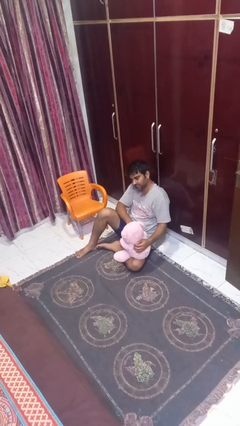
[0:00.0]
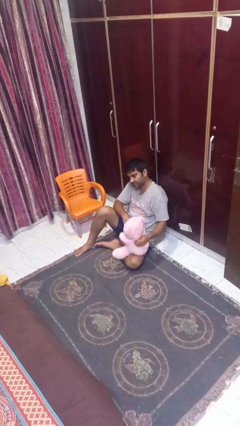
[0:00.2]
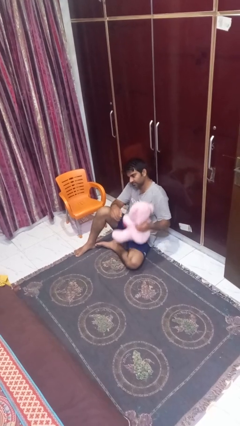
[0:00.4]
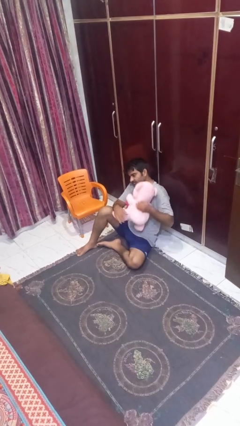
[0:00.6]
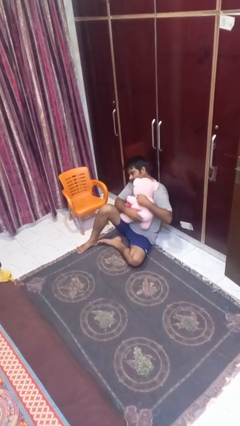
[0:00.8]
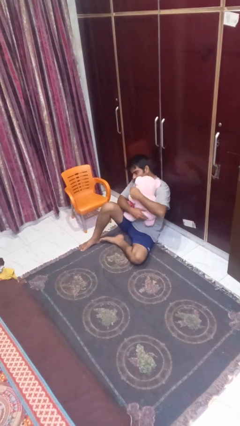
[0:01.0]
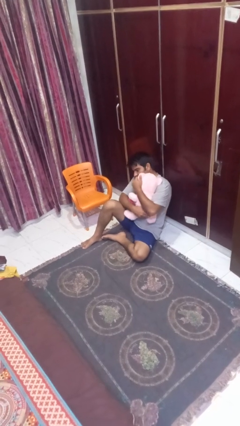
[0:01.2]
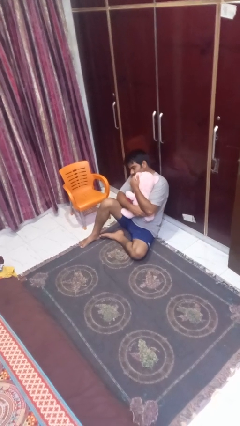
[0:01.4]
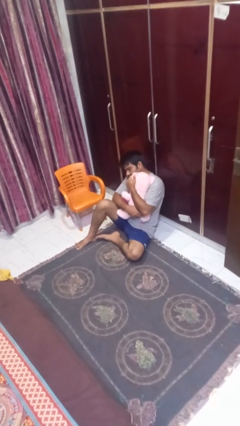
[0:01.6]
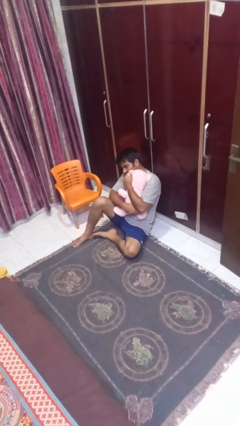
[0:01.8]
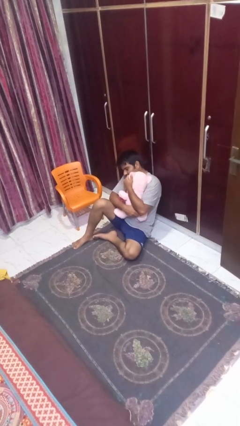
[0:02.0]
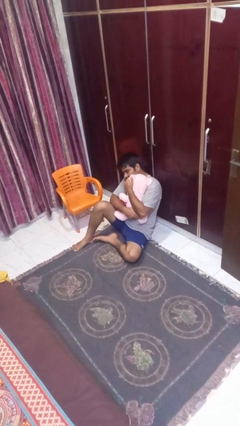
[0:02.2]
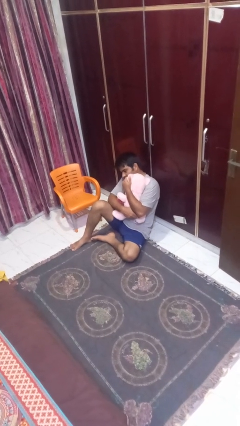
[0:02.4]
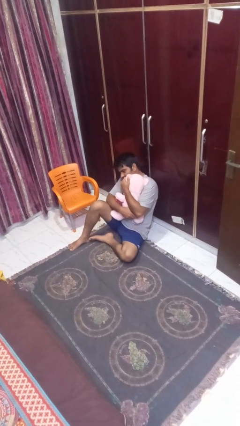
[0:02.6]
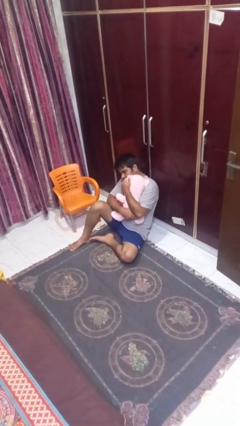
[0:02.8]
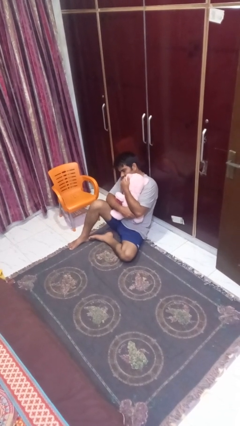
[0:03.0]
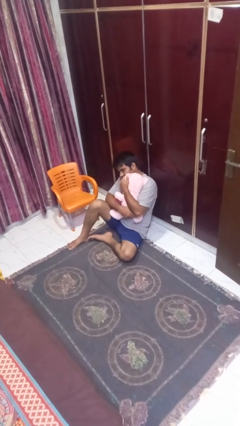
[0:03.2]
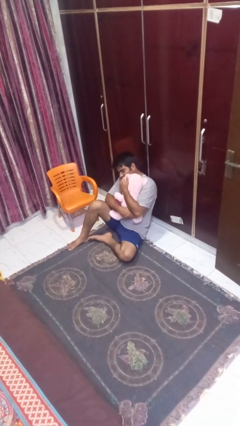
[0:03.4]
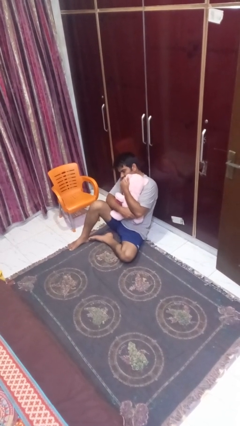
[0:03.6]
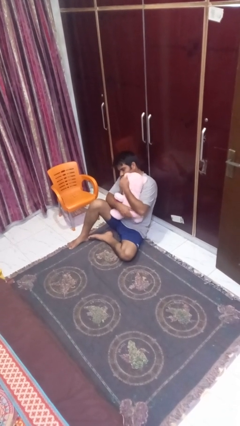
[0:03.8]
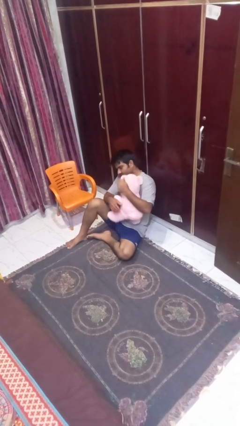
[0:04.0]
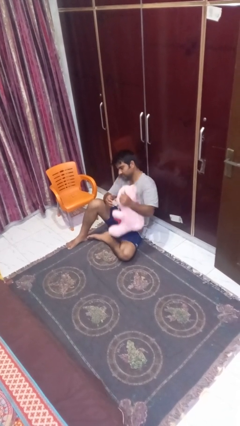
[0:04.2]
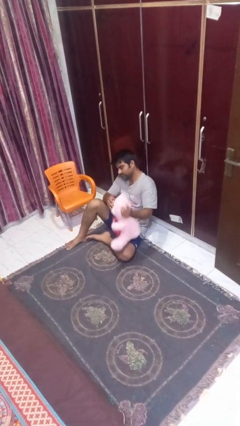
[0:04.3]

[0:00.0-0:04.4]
person hugs stuffed animal

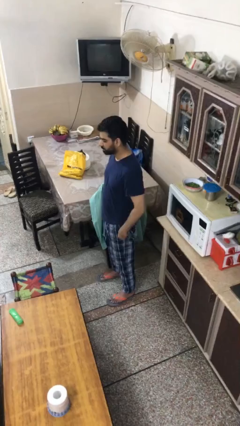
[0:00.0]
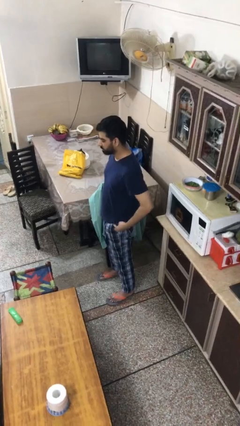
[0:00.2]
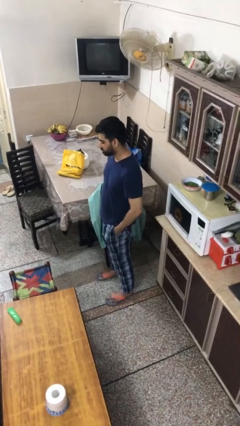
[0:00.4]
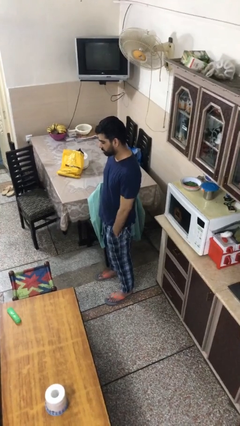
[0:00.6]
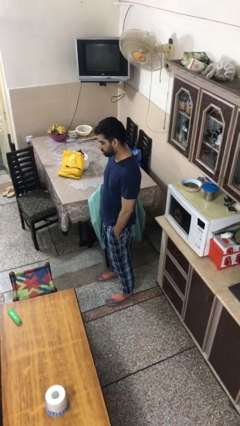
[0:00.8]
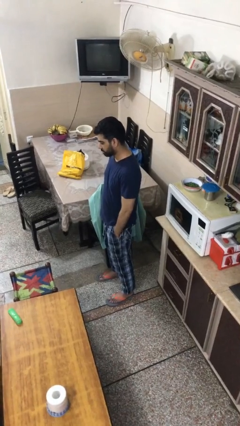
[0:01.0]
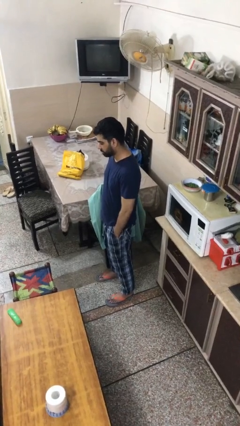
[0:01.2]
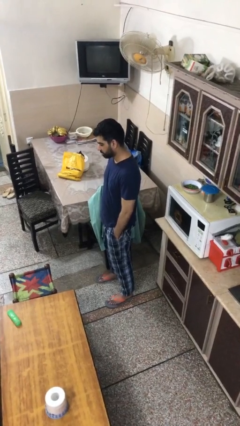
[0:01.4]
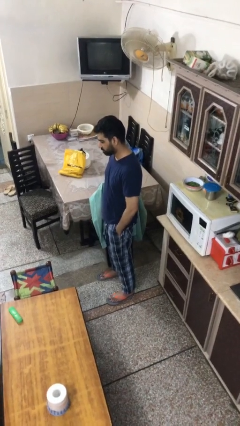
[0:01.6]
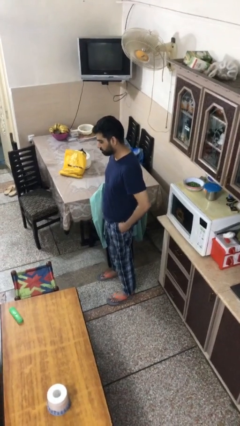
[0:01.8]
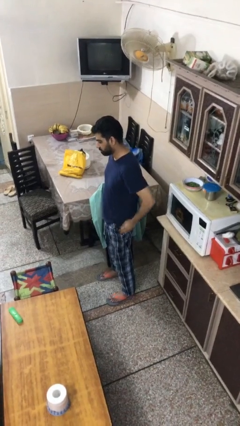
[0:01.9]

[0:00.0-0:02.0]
person puts hands in back pockets

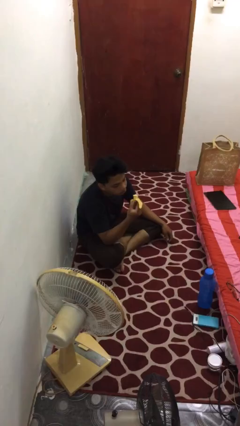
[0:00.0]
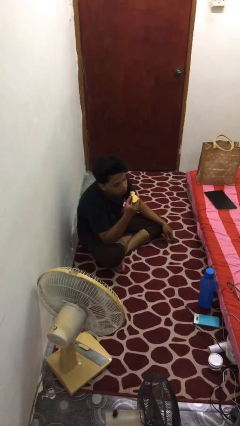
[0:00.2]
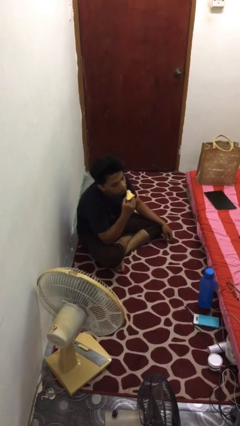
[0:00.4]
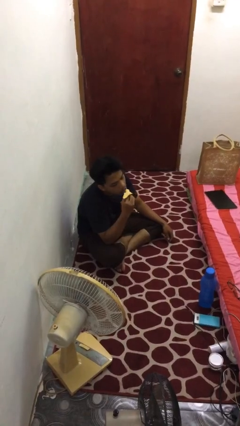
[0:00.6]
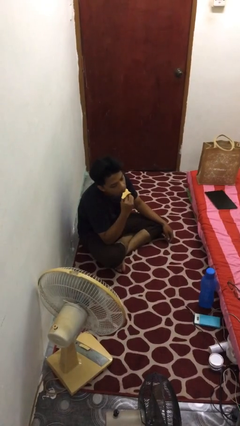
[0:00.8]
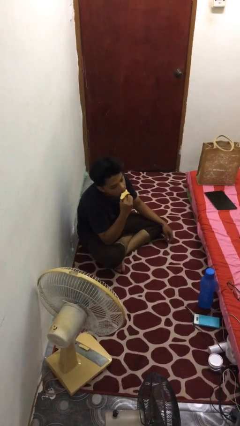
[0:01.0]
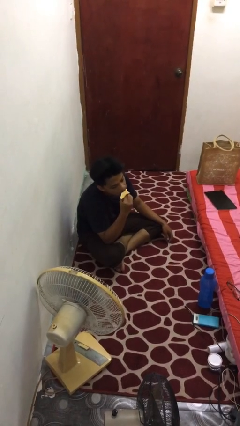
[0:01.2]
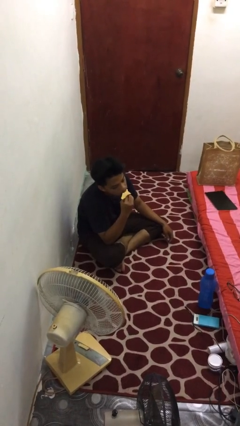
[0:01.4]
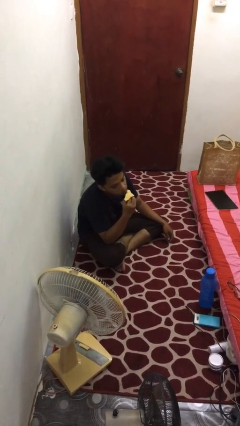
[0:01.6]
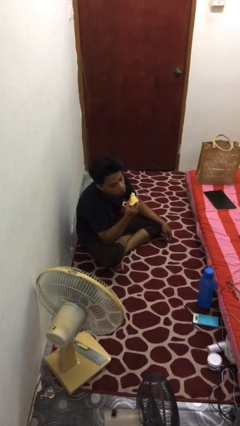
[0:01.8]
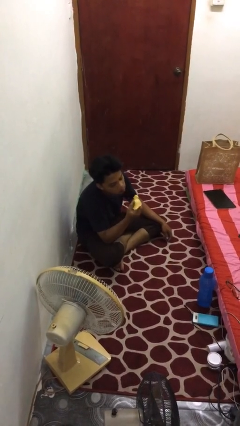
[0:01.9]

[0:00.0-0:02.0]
person eats banana

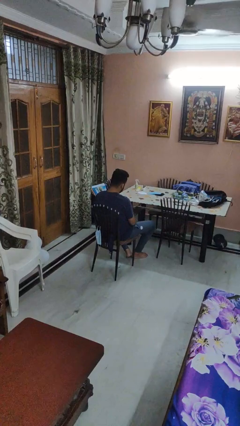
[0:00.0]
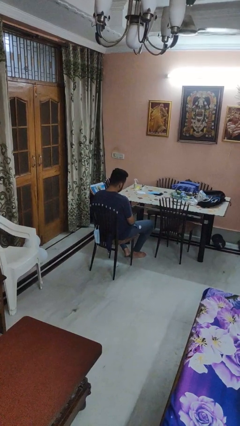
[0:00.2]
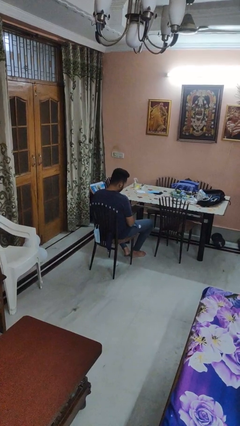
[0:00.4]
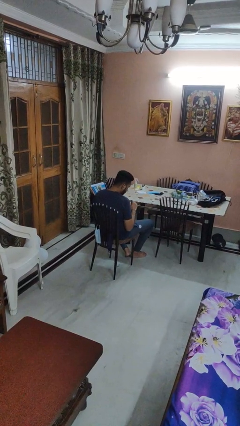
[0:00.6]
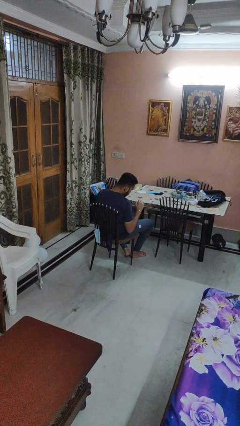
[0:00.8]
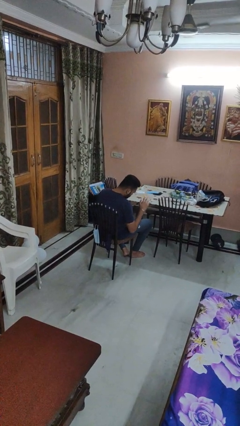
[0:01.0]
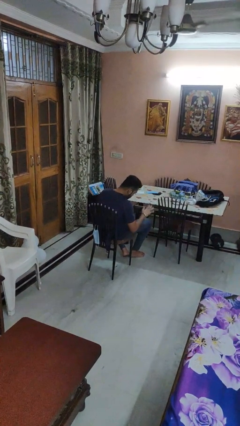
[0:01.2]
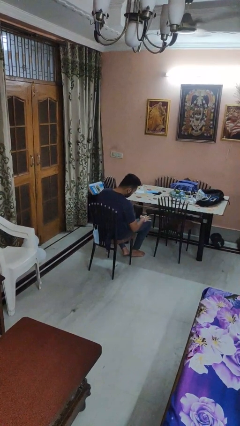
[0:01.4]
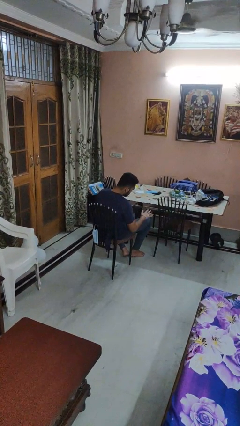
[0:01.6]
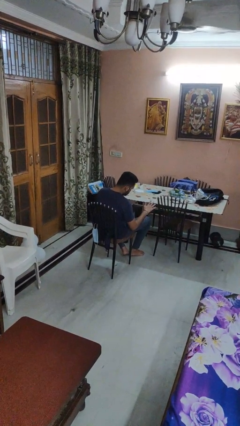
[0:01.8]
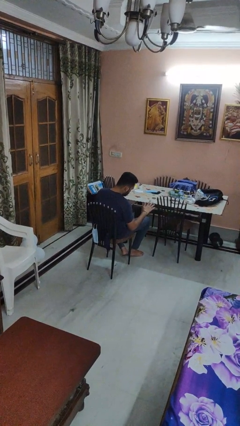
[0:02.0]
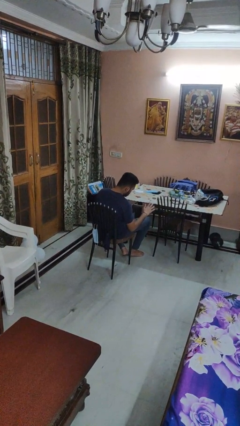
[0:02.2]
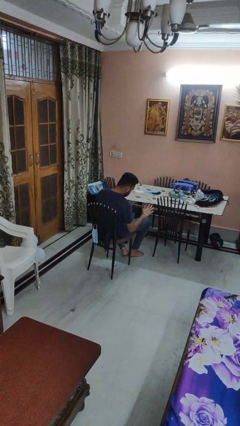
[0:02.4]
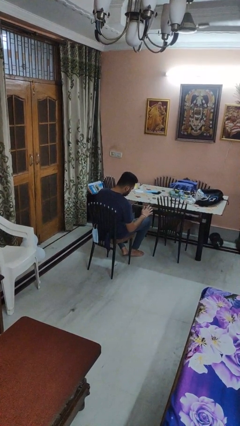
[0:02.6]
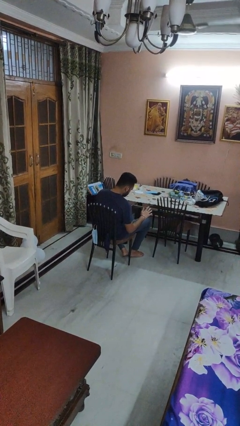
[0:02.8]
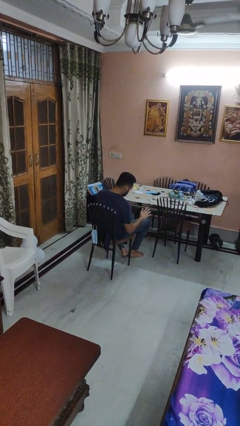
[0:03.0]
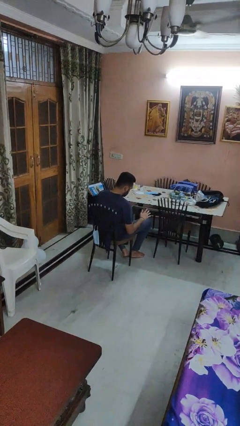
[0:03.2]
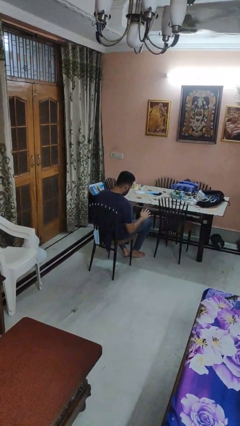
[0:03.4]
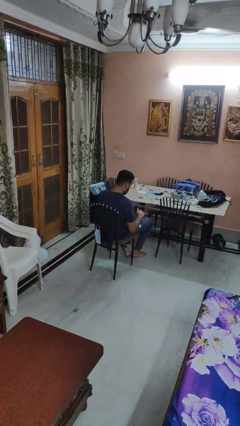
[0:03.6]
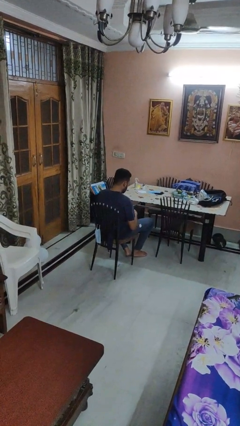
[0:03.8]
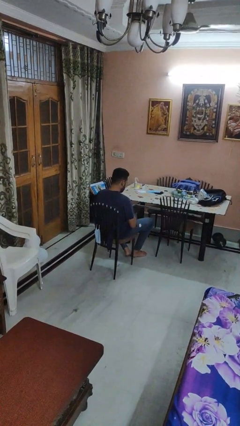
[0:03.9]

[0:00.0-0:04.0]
person swats bug

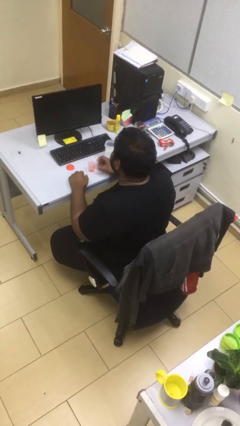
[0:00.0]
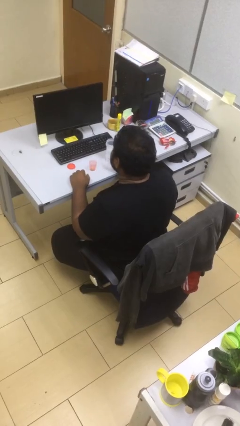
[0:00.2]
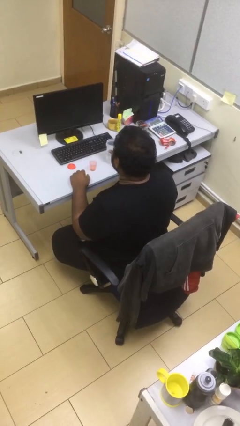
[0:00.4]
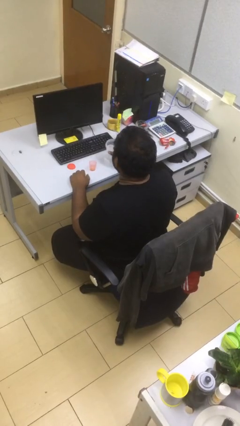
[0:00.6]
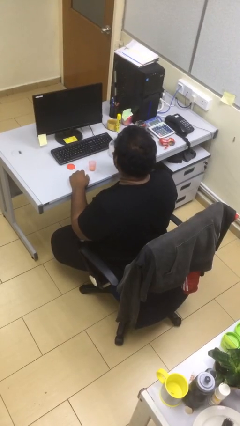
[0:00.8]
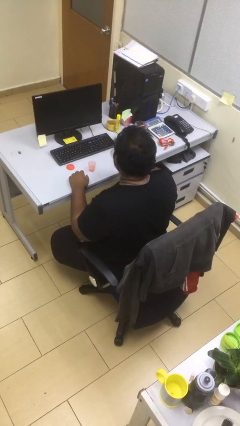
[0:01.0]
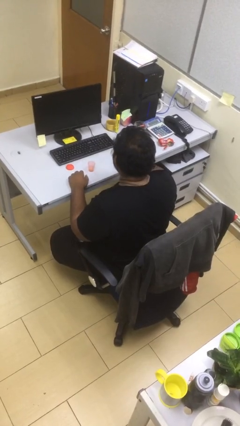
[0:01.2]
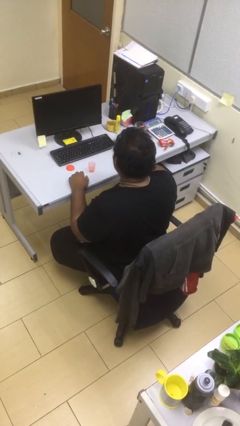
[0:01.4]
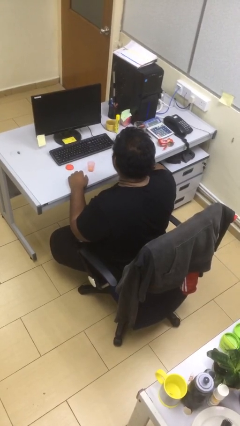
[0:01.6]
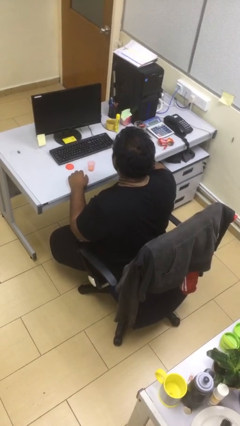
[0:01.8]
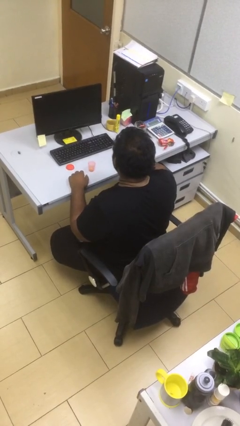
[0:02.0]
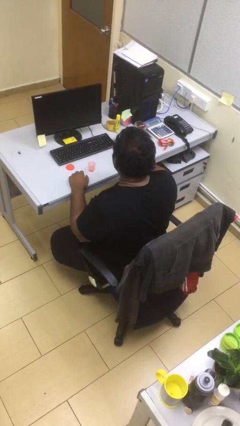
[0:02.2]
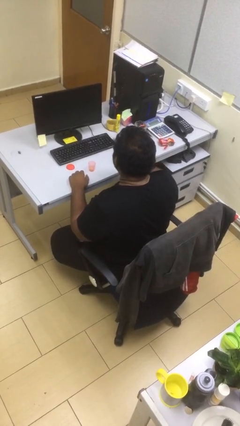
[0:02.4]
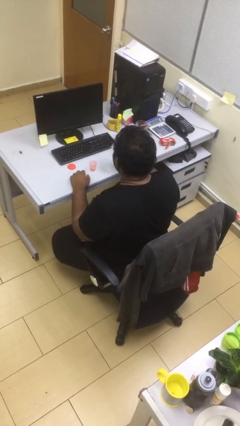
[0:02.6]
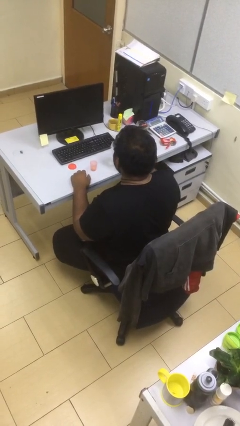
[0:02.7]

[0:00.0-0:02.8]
person drinks from cup

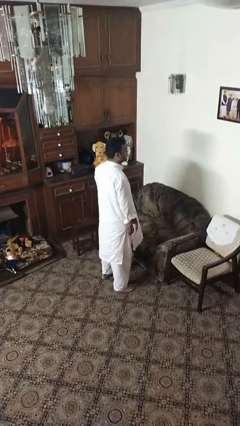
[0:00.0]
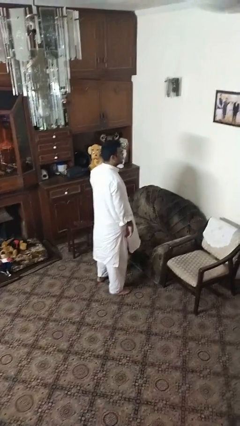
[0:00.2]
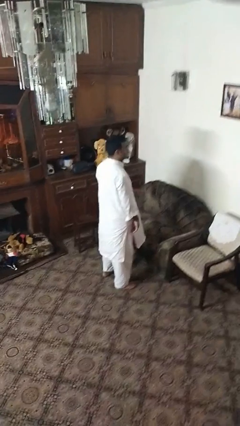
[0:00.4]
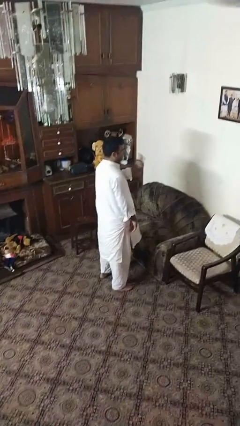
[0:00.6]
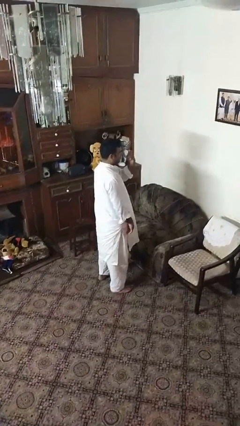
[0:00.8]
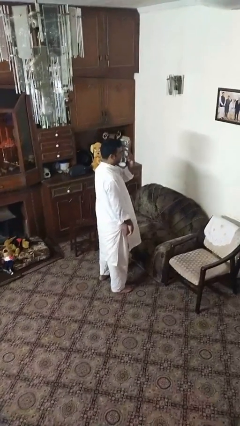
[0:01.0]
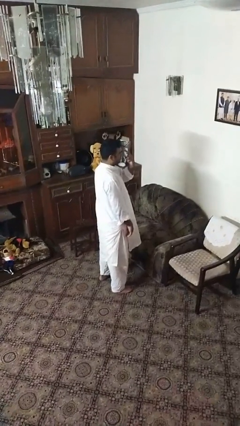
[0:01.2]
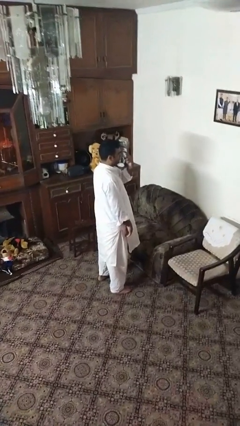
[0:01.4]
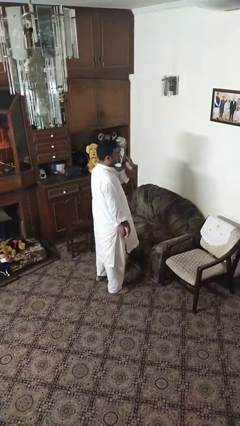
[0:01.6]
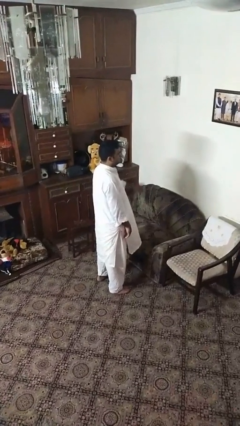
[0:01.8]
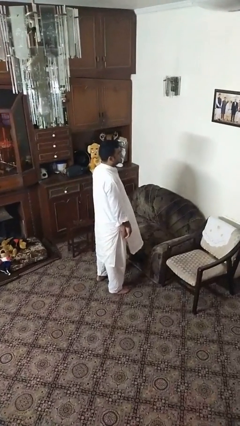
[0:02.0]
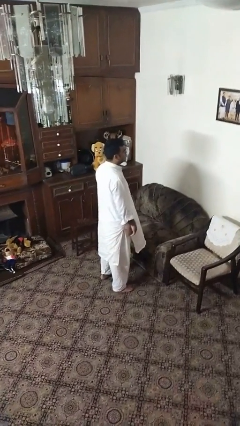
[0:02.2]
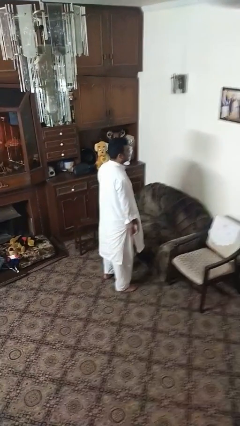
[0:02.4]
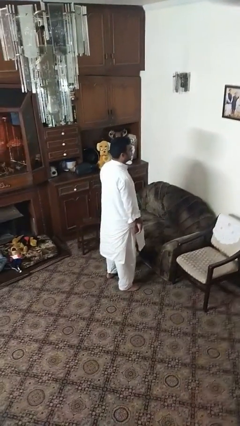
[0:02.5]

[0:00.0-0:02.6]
person gestures watch closely
